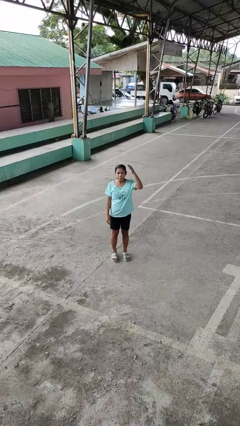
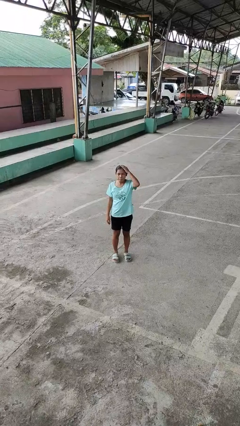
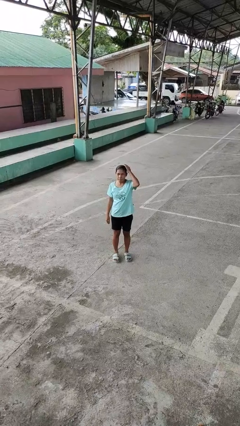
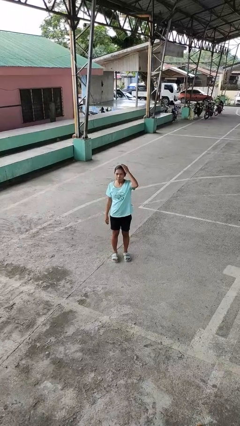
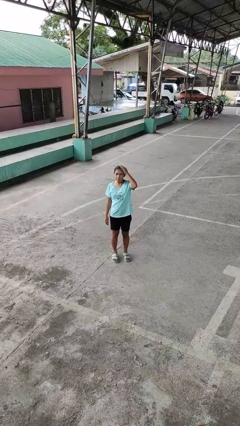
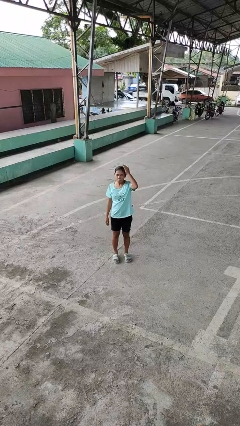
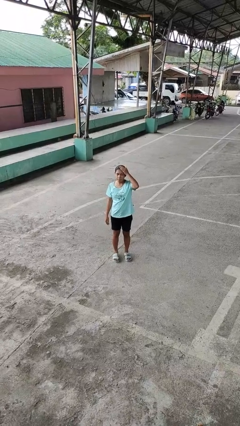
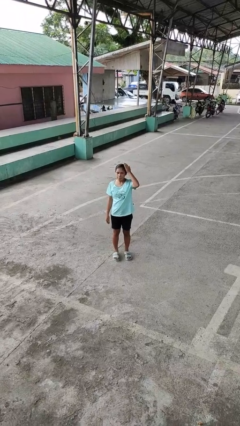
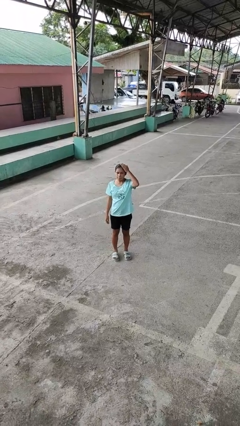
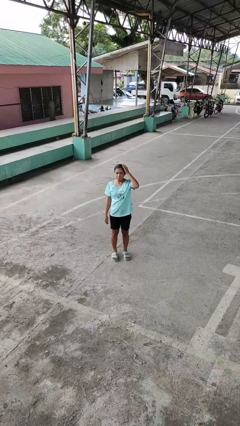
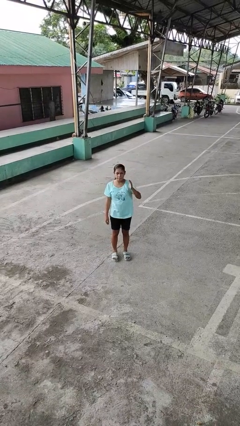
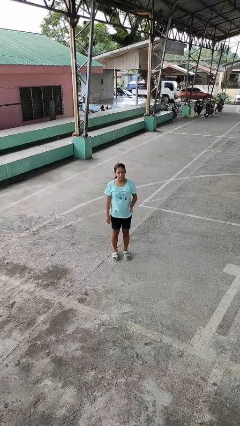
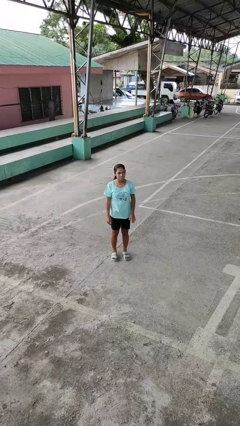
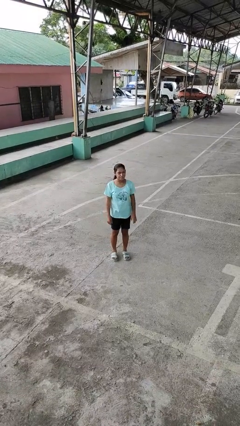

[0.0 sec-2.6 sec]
person pats head

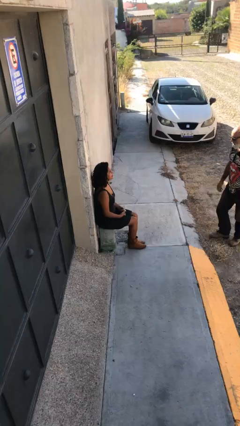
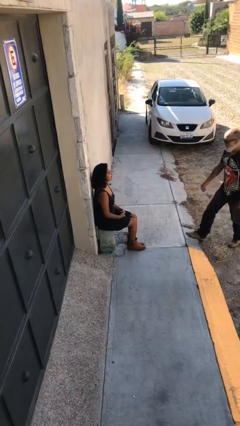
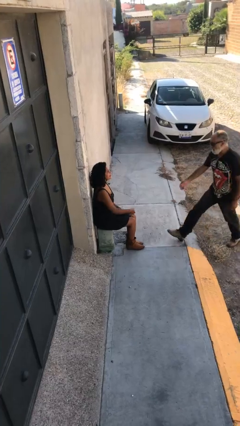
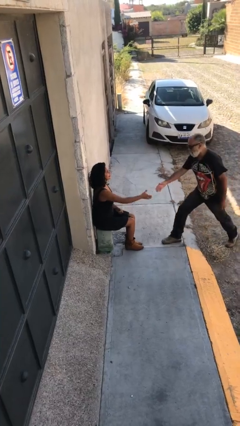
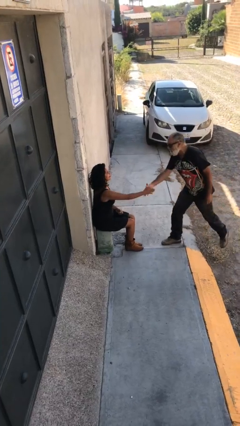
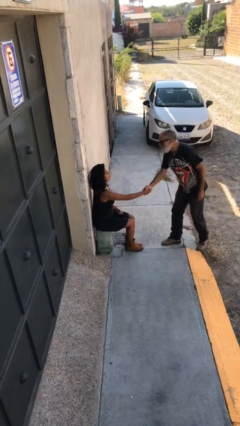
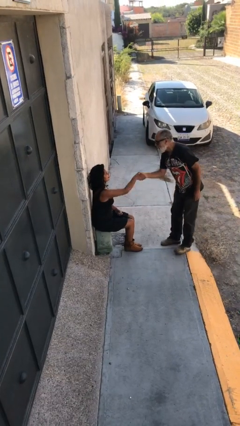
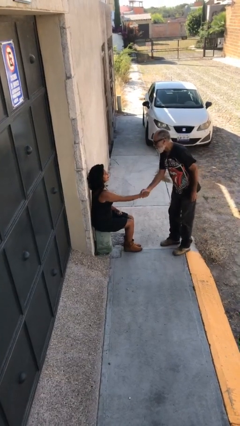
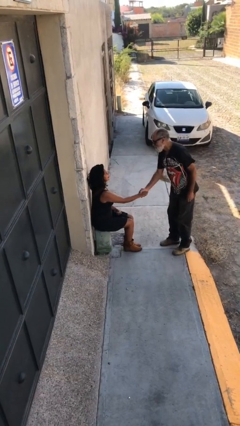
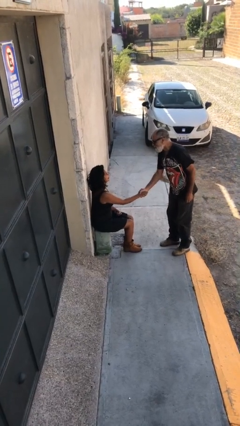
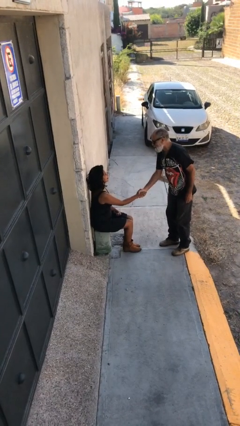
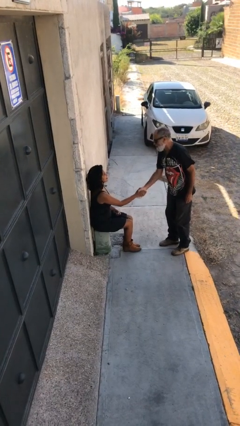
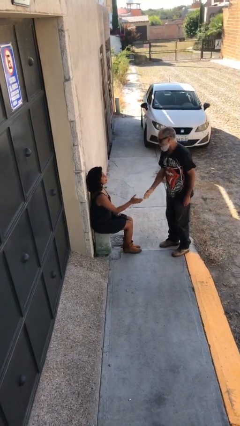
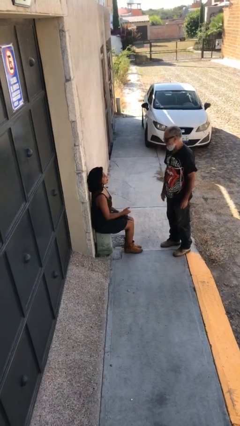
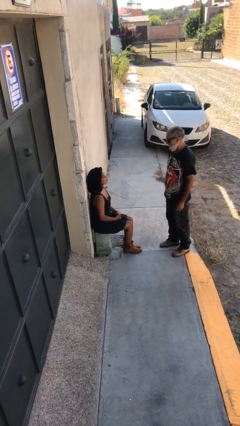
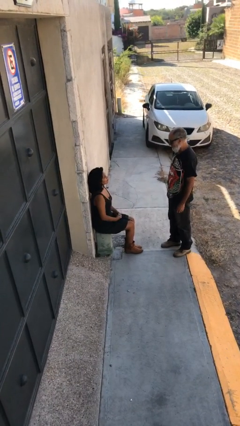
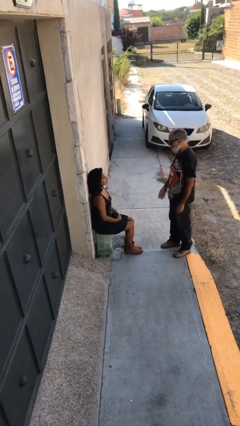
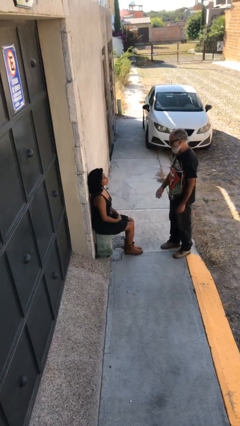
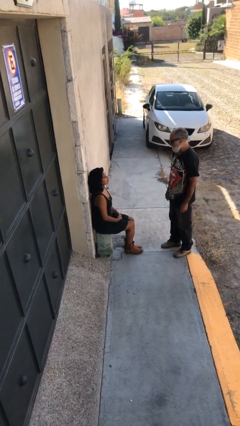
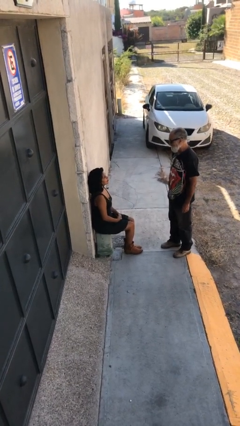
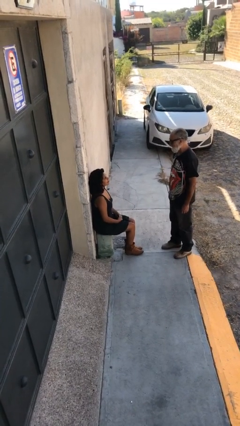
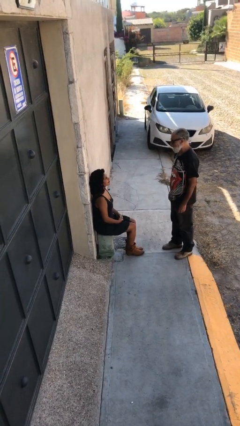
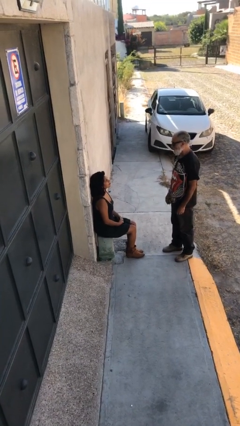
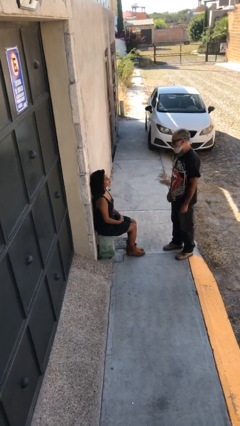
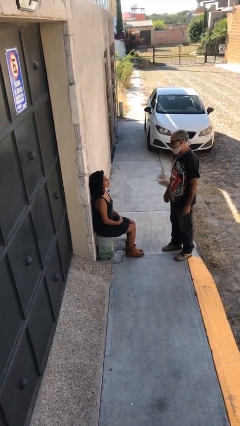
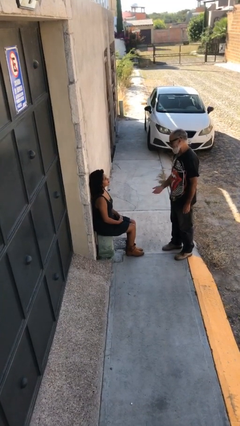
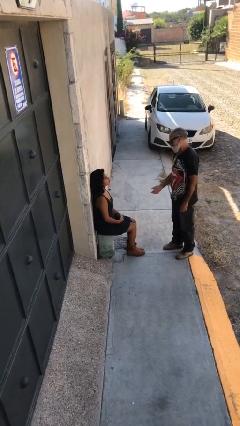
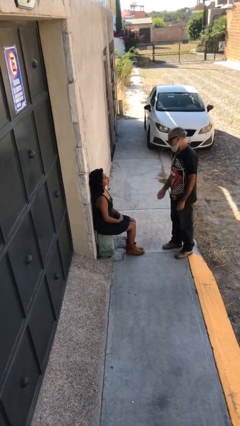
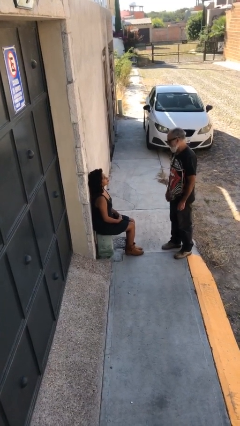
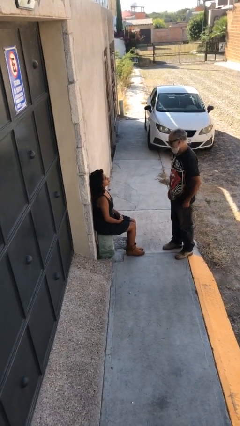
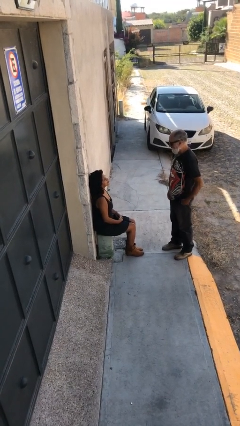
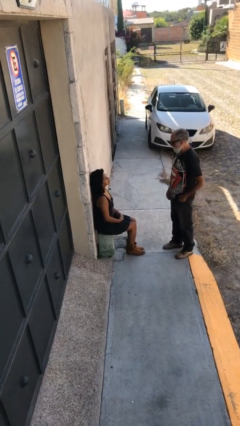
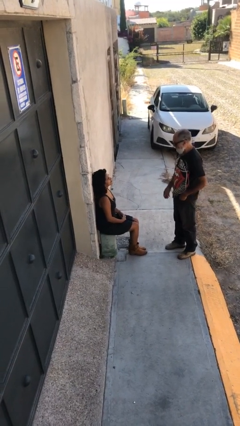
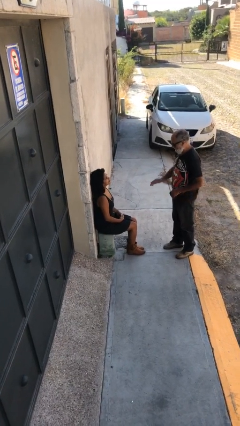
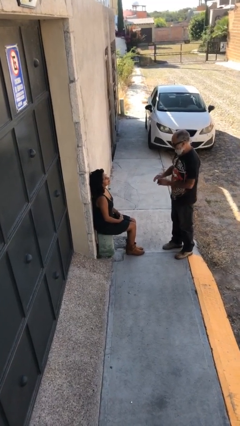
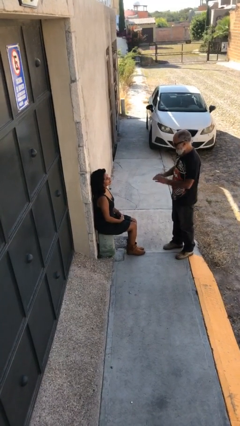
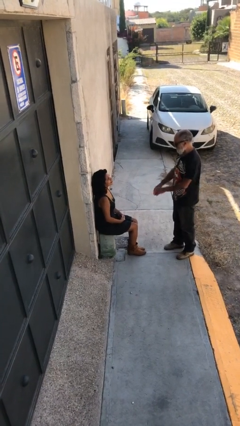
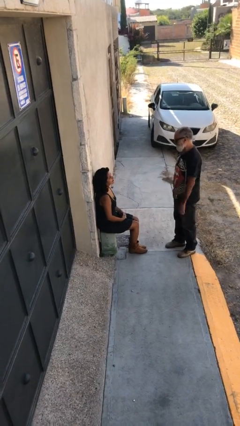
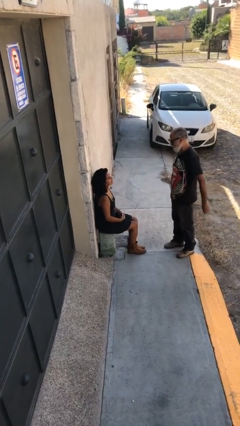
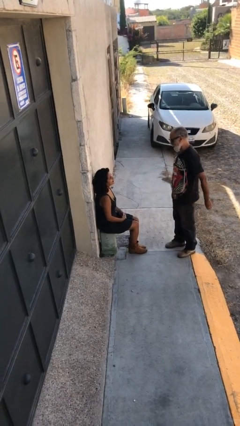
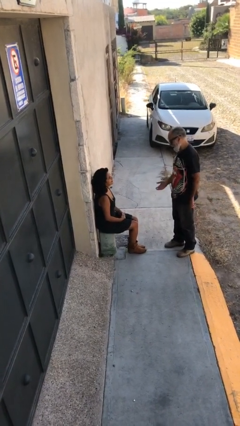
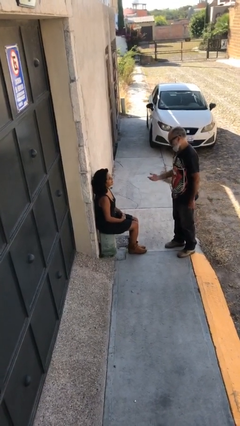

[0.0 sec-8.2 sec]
person shakes hand

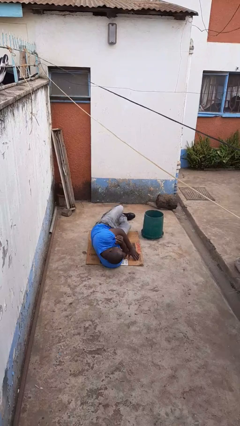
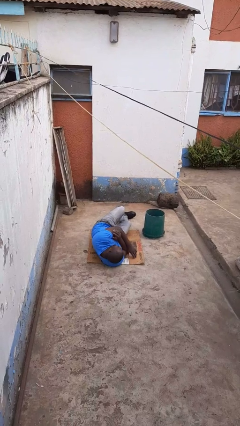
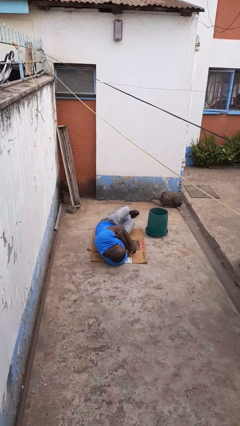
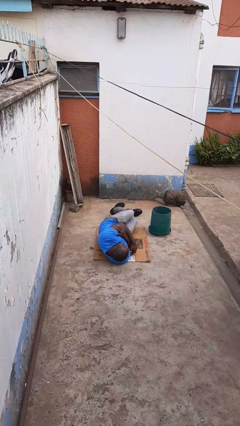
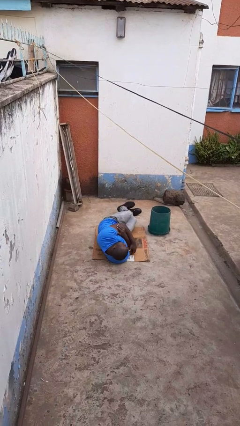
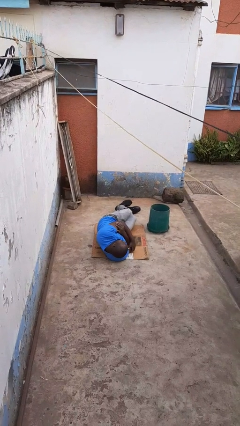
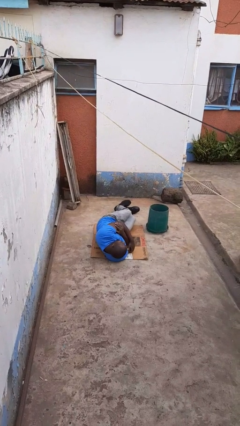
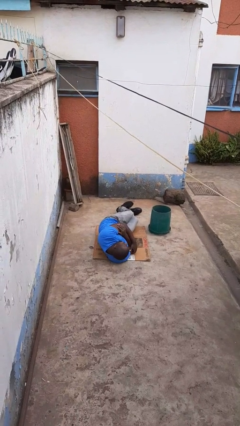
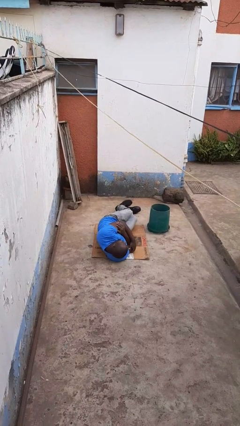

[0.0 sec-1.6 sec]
person lies down on floor

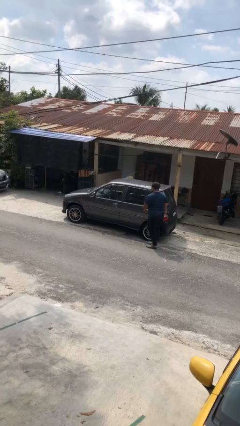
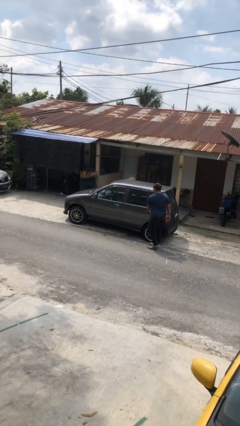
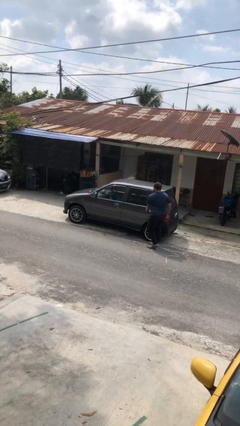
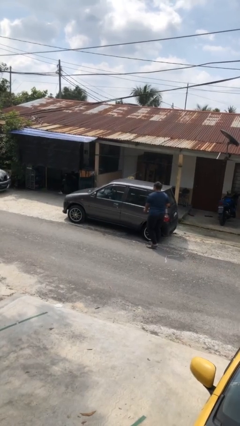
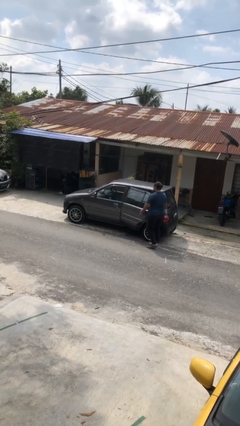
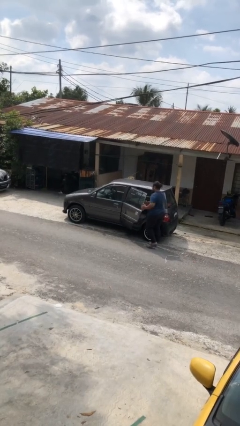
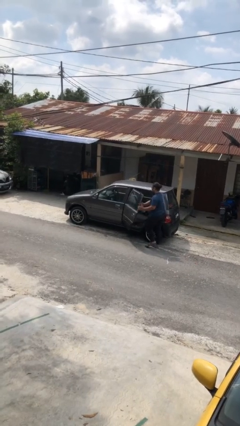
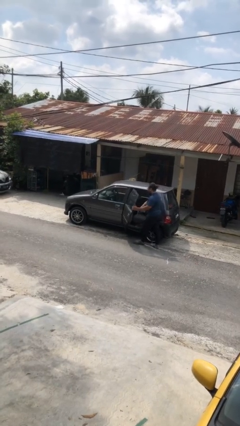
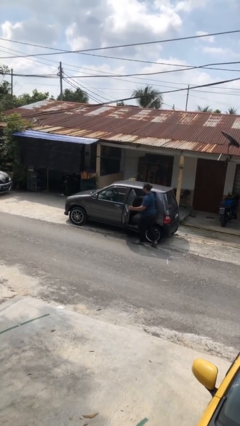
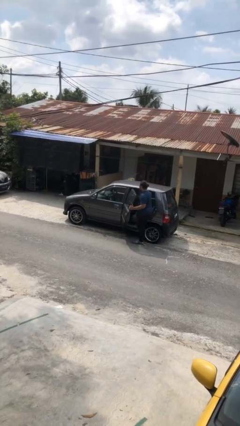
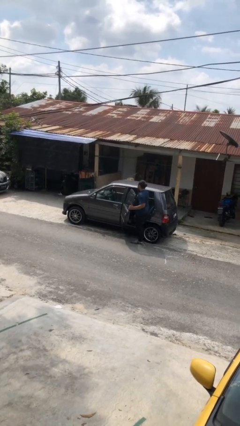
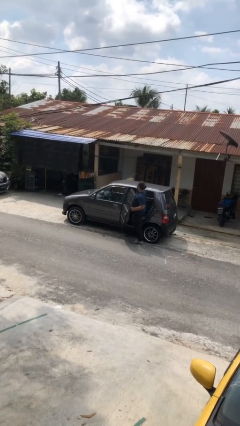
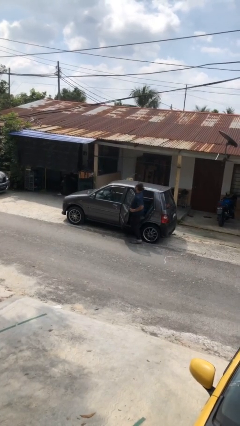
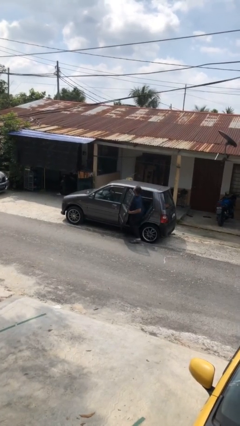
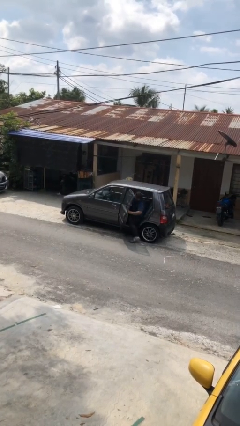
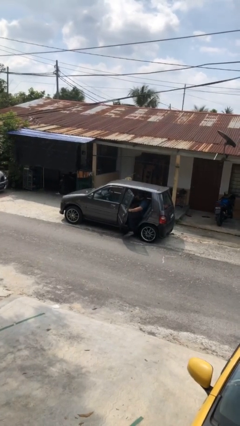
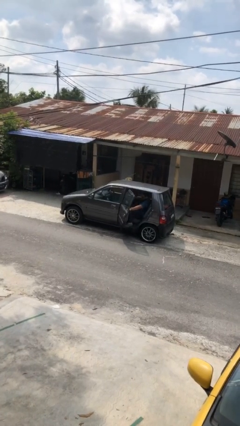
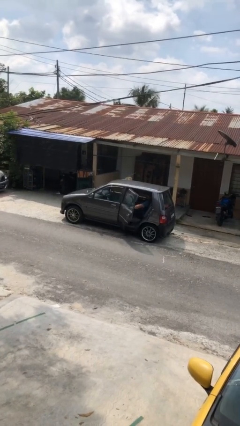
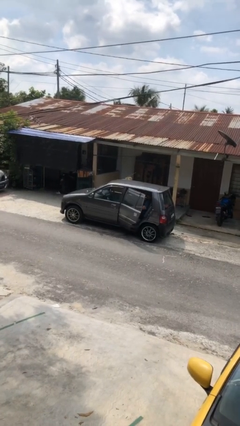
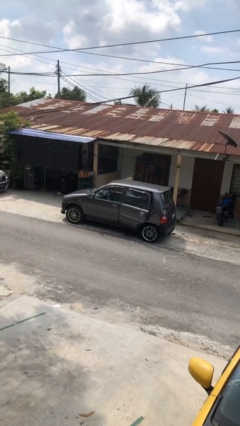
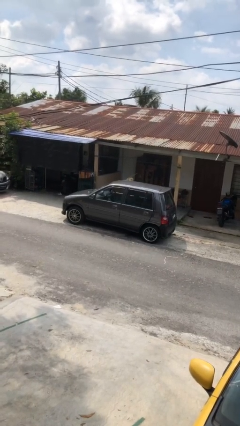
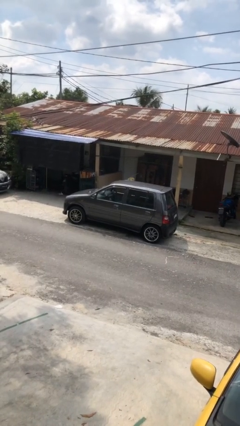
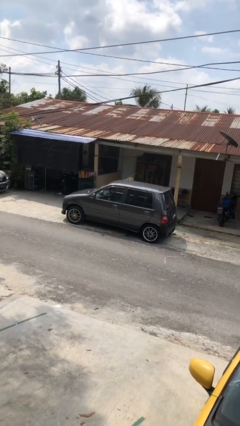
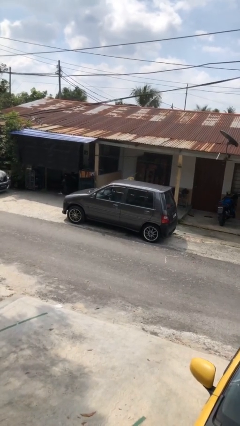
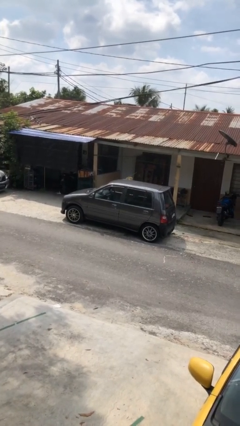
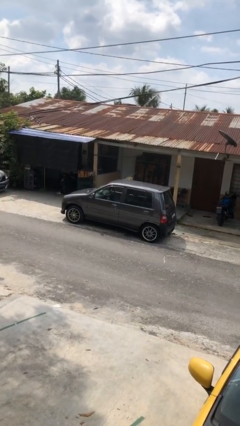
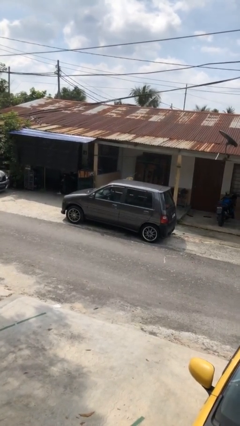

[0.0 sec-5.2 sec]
car picks up person
